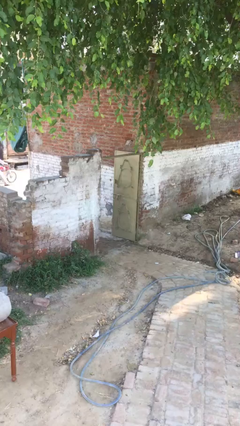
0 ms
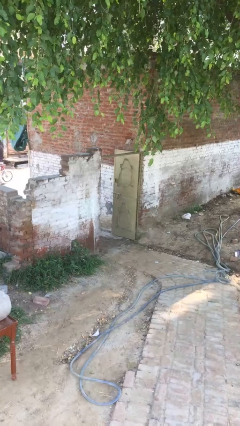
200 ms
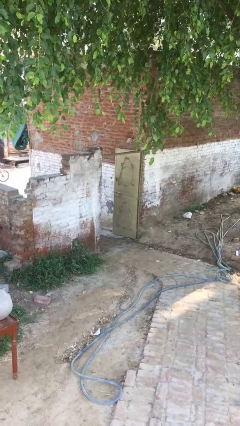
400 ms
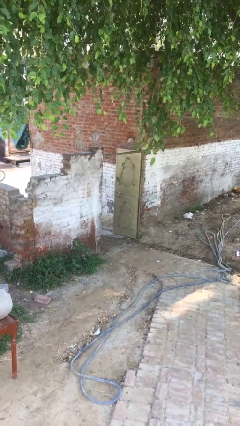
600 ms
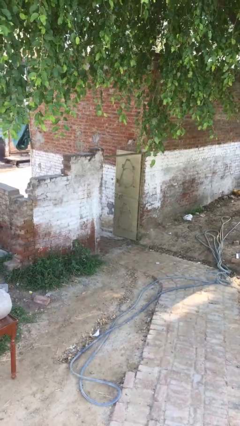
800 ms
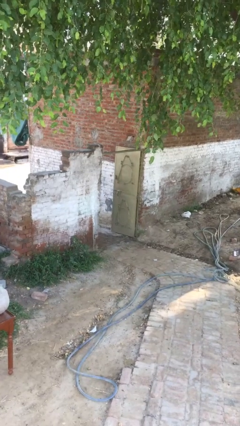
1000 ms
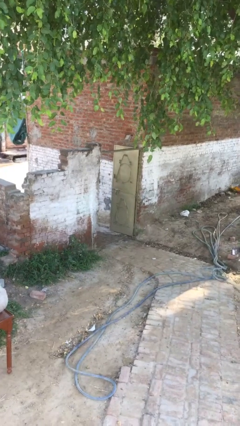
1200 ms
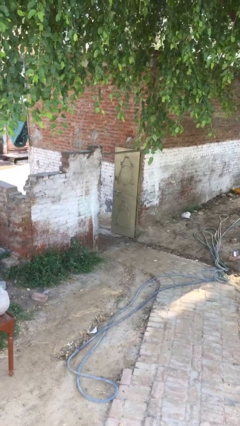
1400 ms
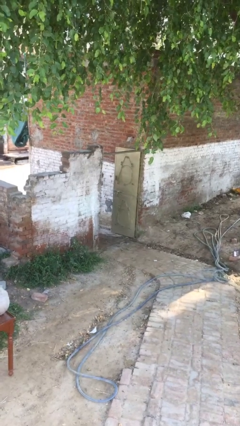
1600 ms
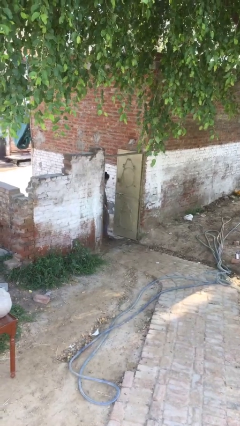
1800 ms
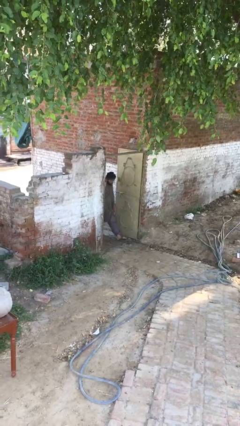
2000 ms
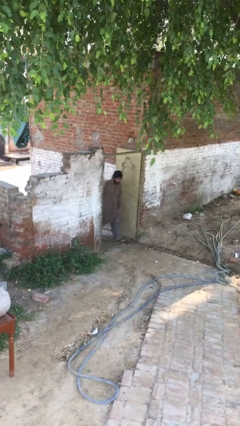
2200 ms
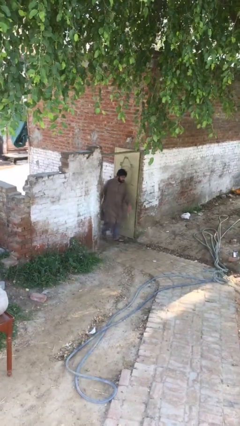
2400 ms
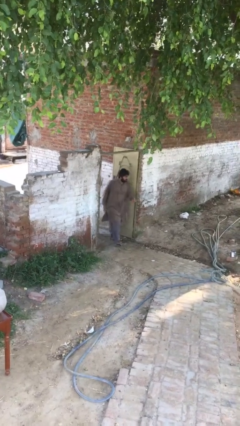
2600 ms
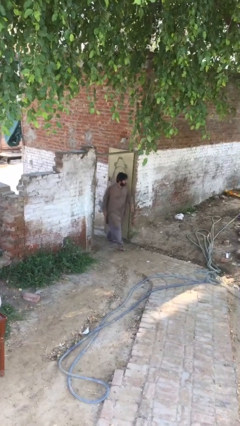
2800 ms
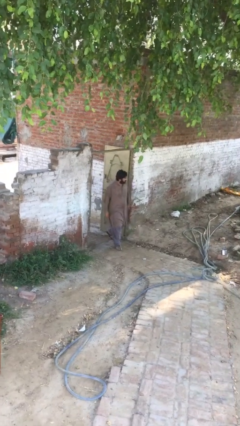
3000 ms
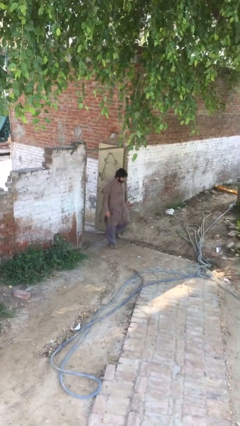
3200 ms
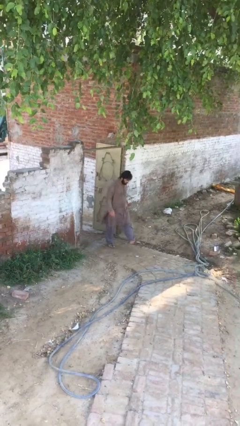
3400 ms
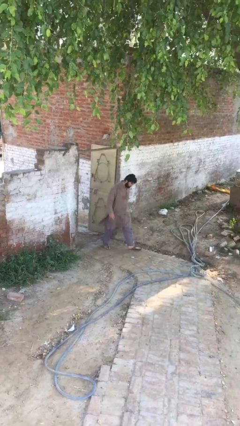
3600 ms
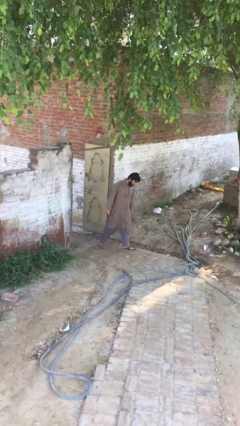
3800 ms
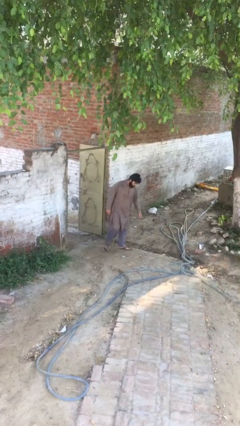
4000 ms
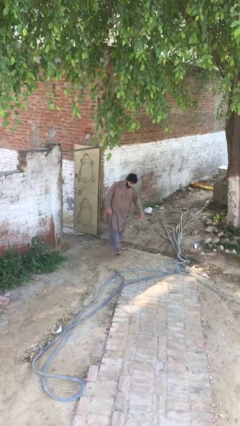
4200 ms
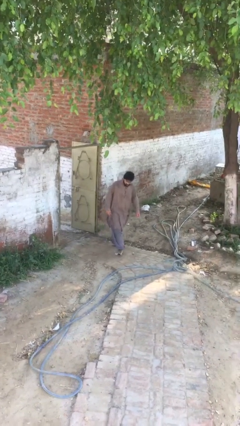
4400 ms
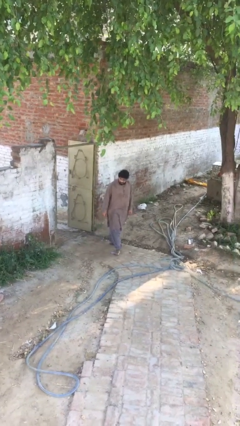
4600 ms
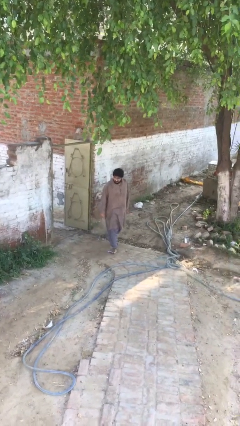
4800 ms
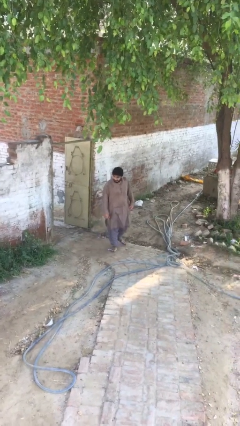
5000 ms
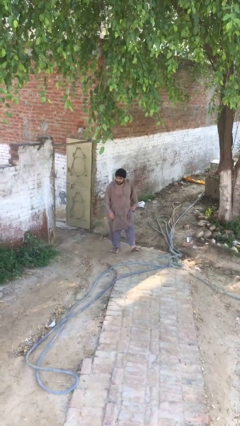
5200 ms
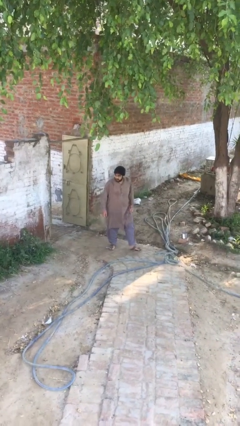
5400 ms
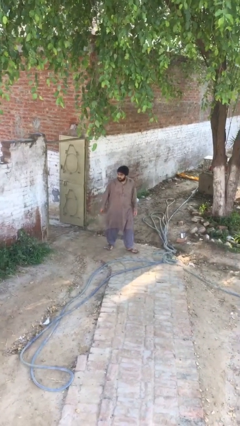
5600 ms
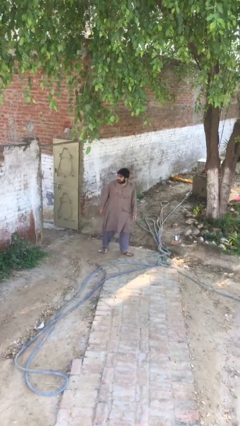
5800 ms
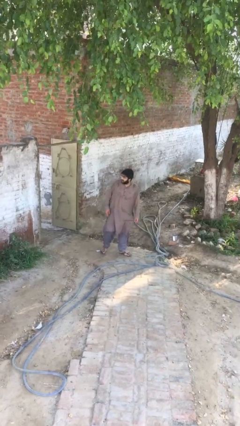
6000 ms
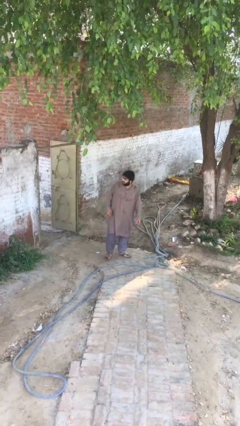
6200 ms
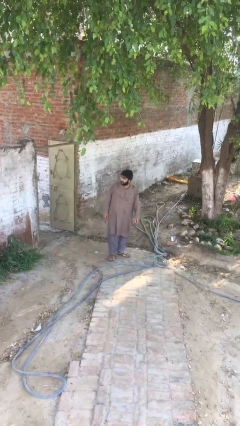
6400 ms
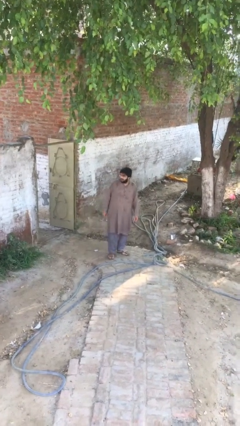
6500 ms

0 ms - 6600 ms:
person enters scene through structure

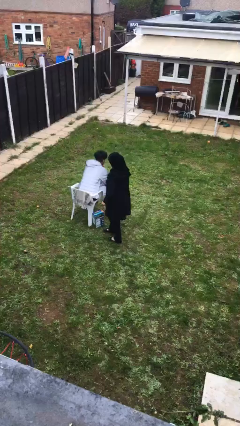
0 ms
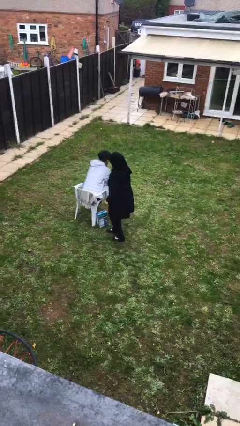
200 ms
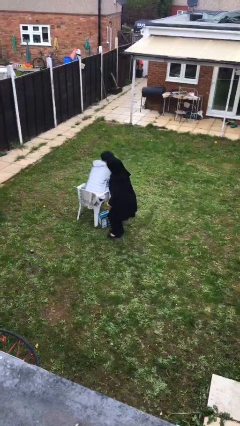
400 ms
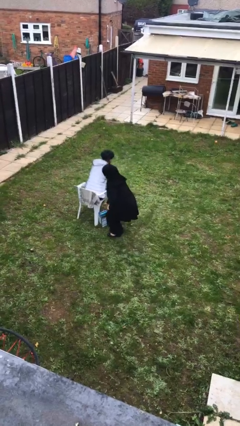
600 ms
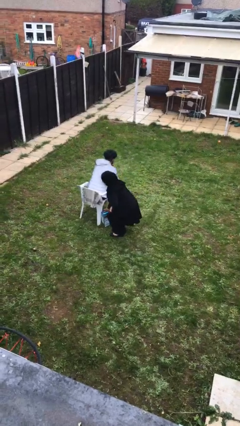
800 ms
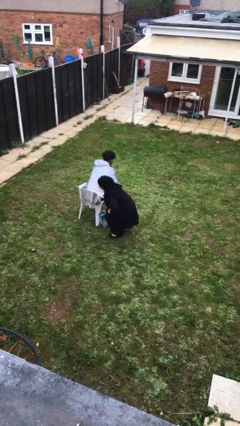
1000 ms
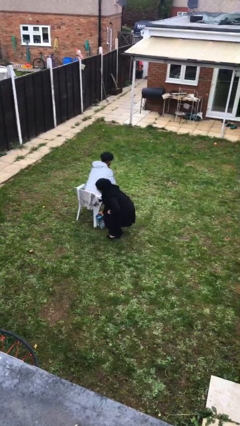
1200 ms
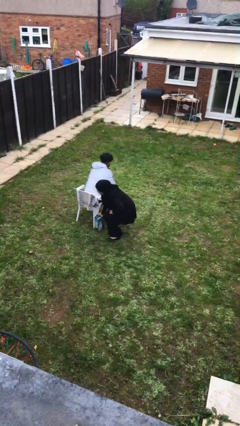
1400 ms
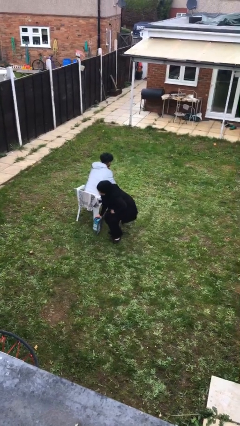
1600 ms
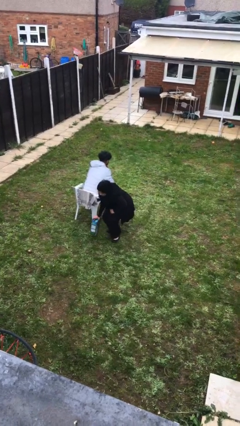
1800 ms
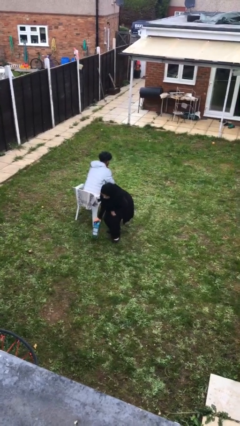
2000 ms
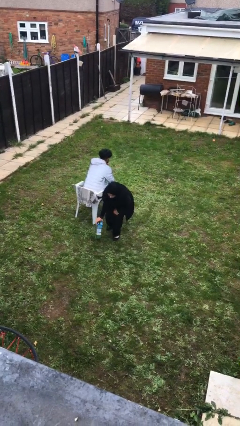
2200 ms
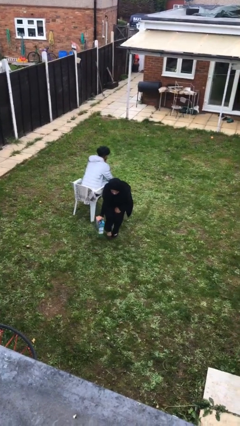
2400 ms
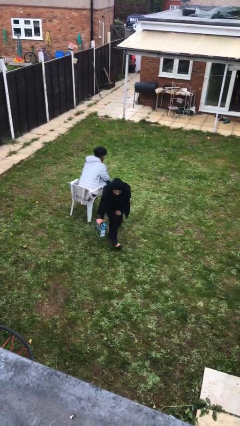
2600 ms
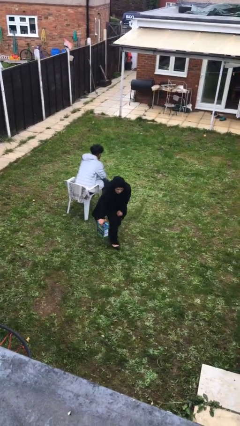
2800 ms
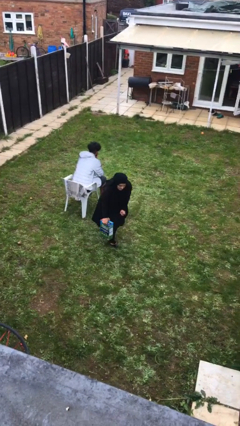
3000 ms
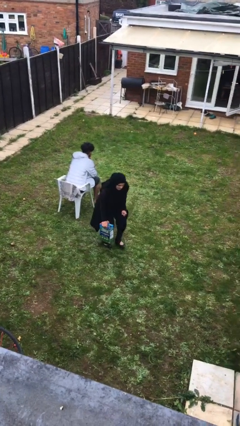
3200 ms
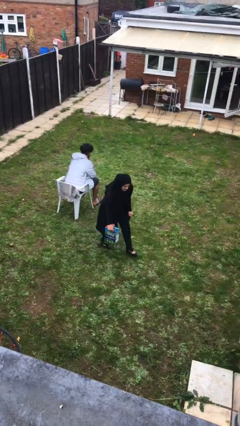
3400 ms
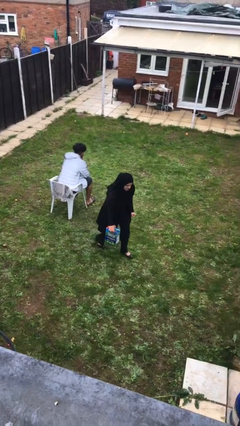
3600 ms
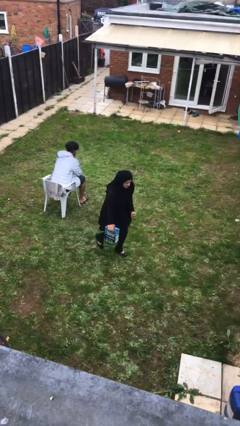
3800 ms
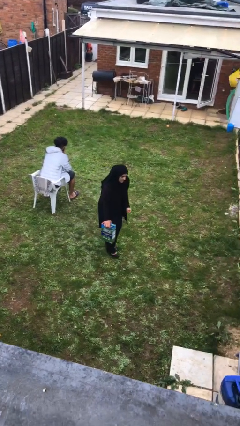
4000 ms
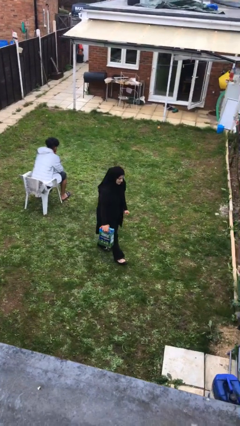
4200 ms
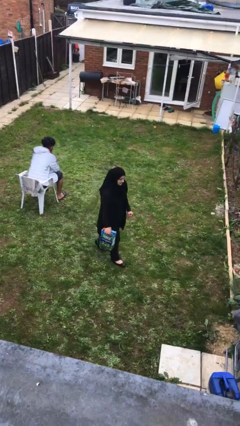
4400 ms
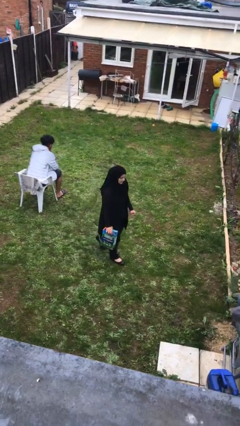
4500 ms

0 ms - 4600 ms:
person steals object from person

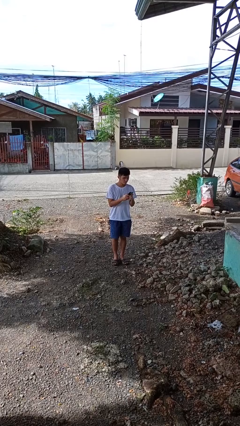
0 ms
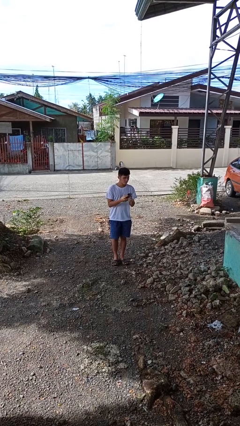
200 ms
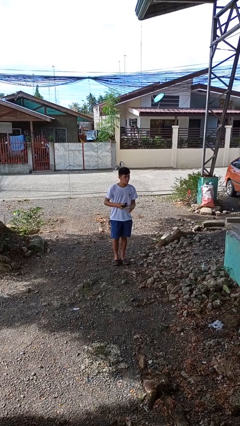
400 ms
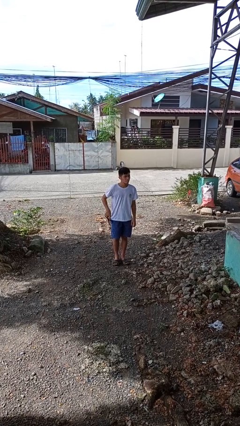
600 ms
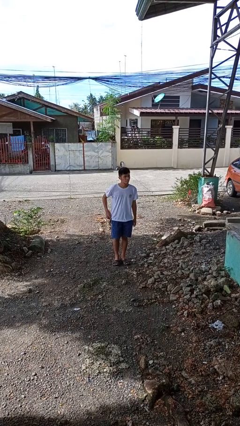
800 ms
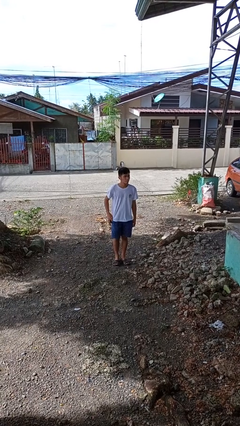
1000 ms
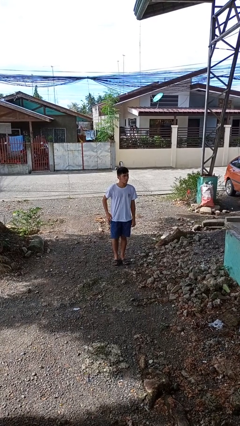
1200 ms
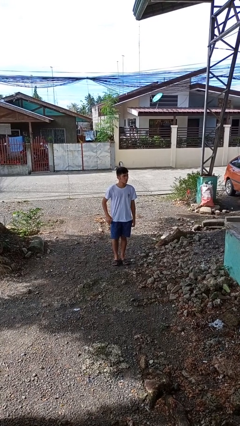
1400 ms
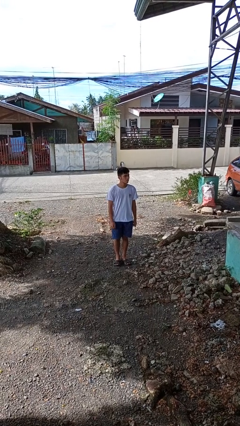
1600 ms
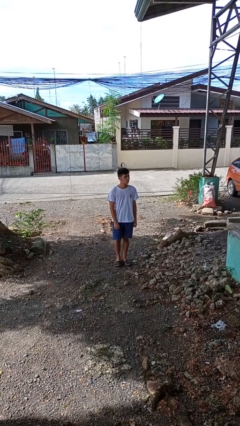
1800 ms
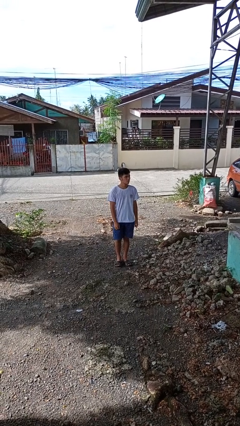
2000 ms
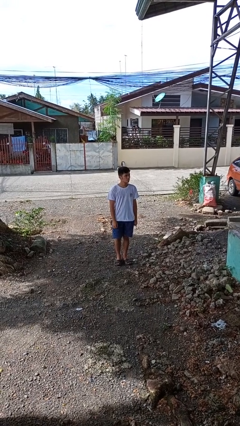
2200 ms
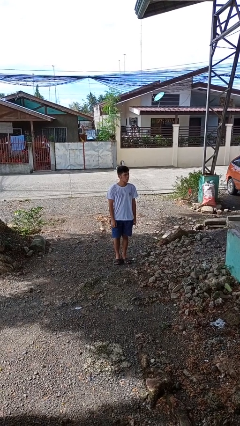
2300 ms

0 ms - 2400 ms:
person puts phone into pocket

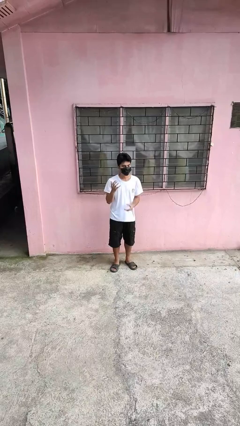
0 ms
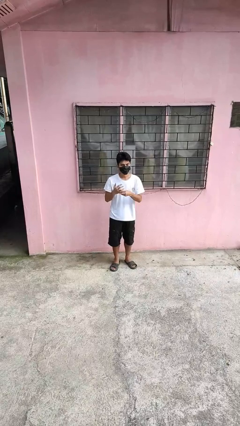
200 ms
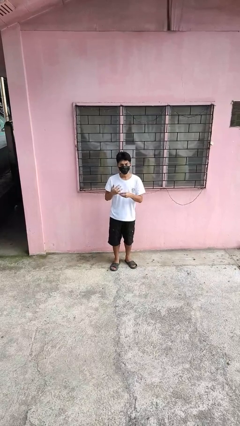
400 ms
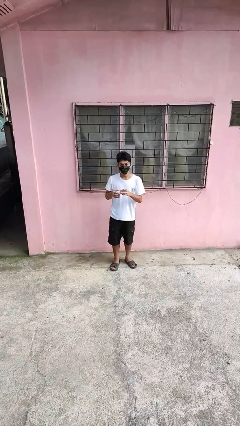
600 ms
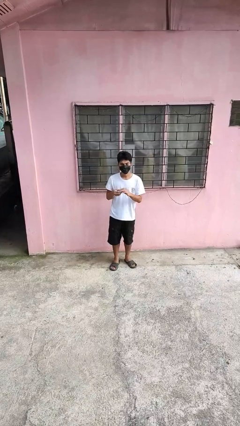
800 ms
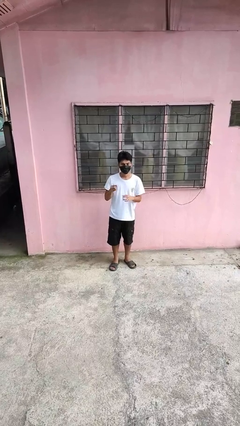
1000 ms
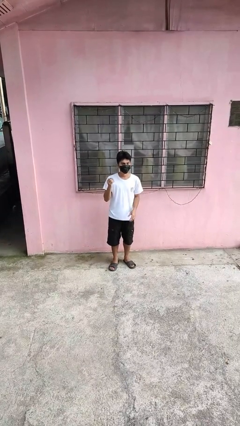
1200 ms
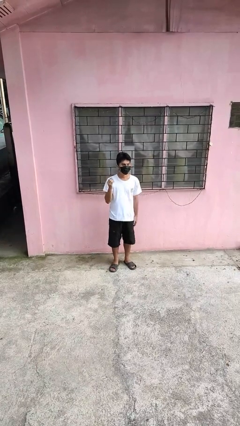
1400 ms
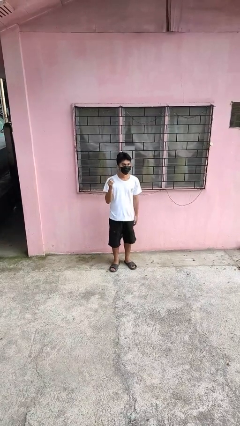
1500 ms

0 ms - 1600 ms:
person takes off ring

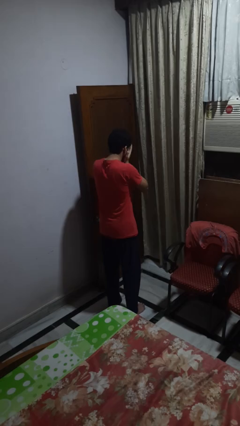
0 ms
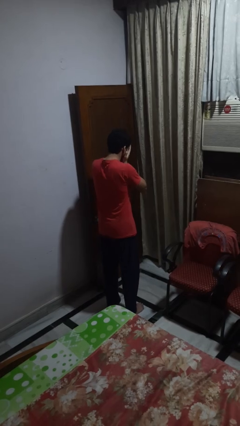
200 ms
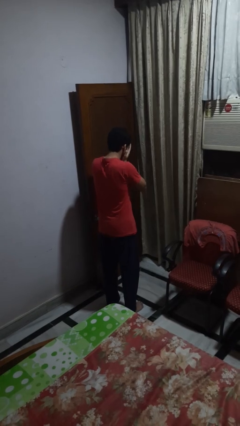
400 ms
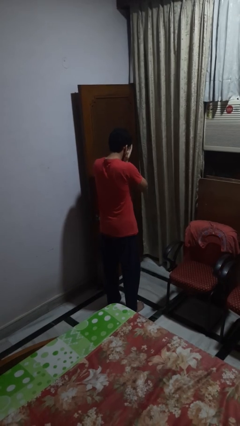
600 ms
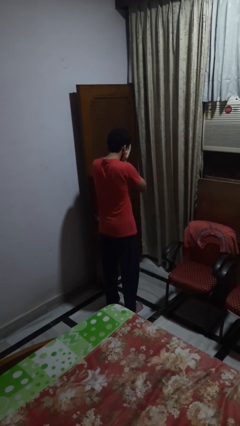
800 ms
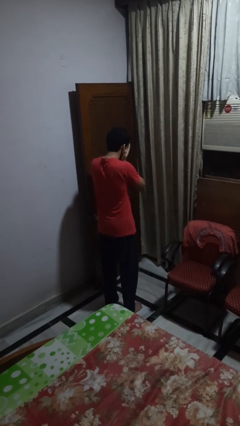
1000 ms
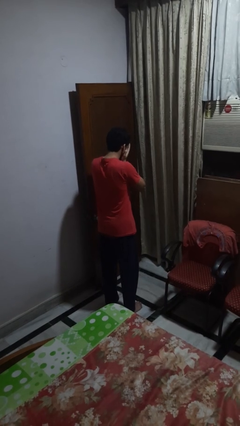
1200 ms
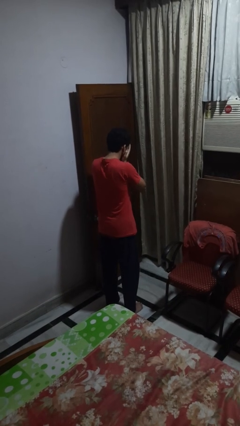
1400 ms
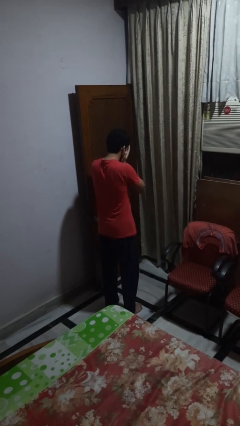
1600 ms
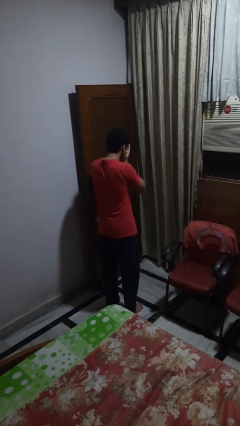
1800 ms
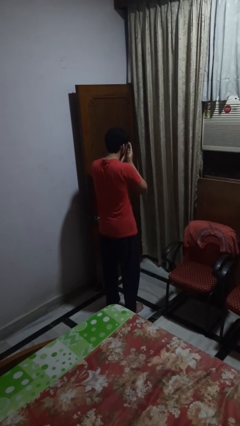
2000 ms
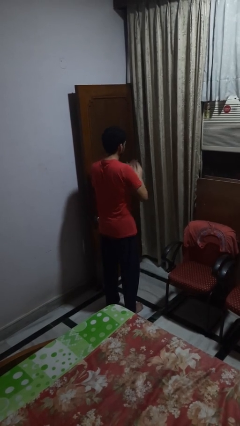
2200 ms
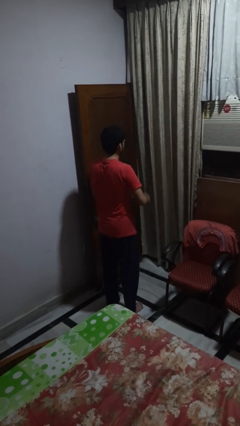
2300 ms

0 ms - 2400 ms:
person covers face with hands
